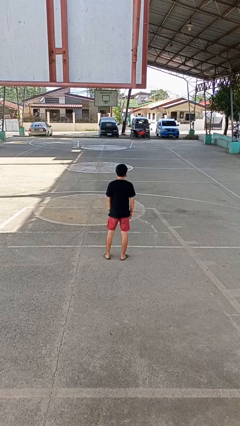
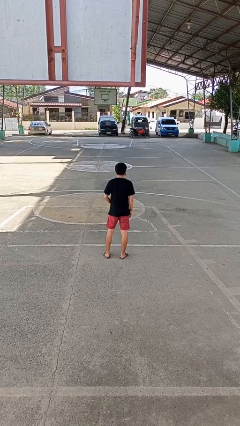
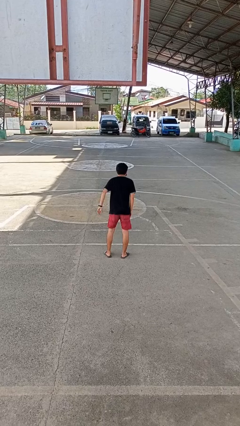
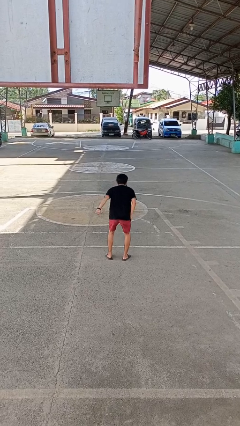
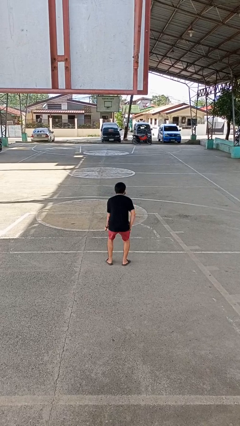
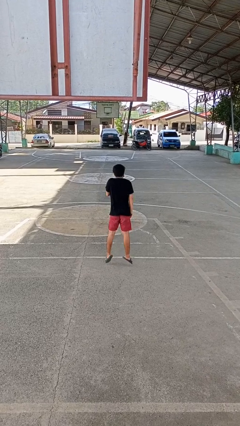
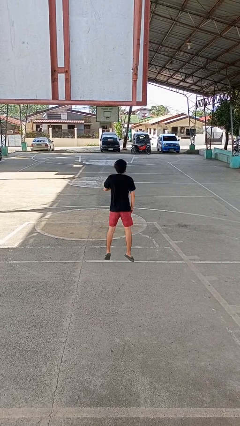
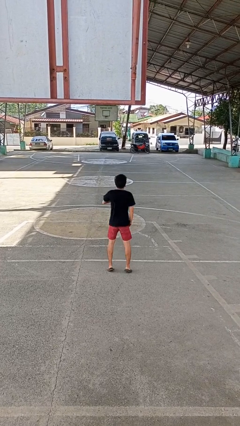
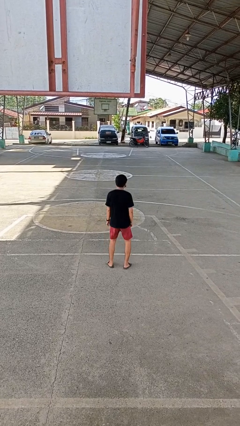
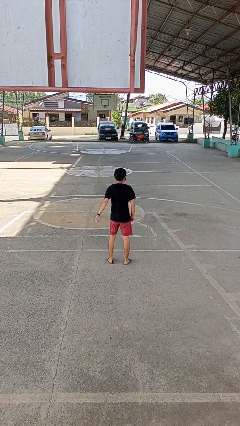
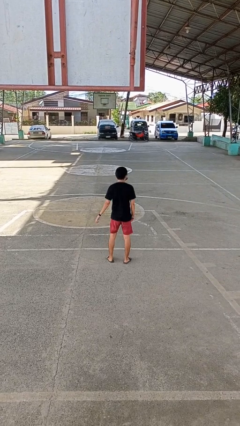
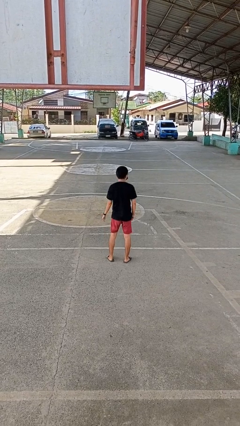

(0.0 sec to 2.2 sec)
person jumps

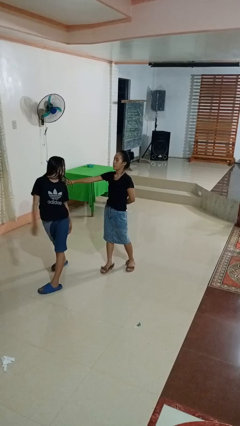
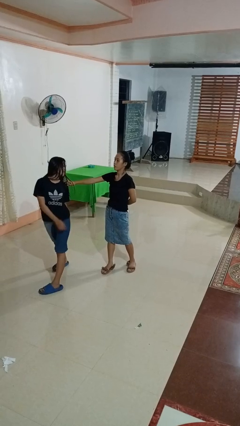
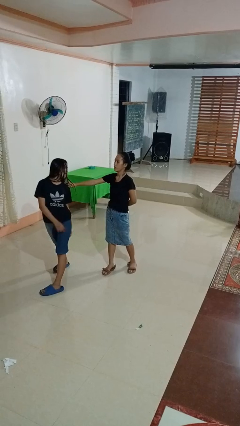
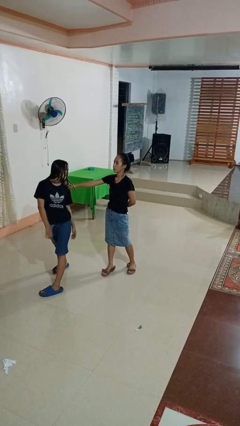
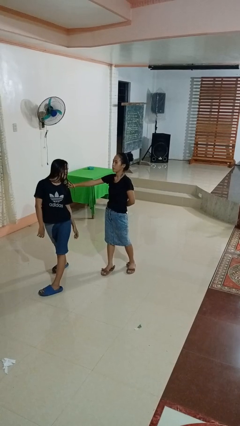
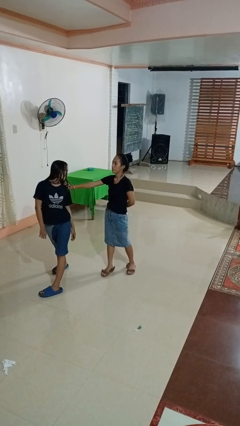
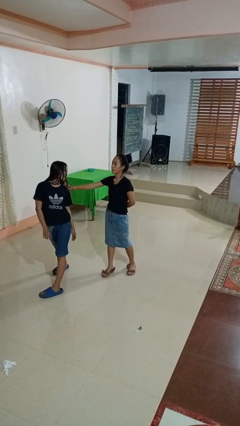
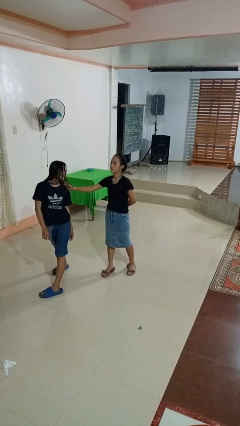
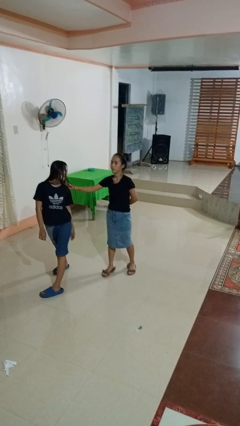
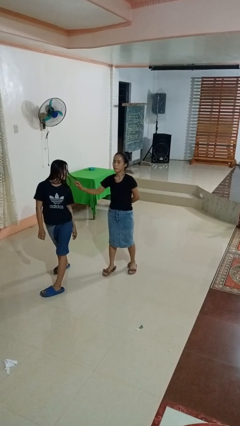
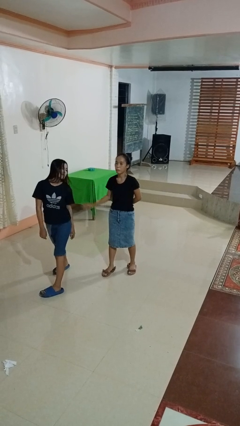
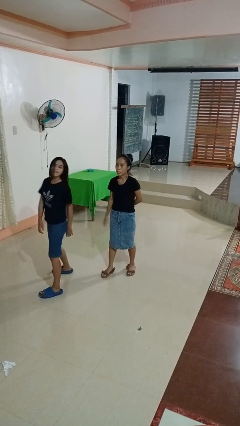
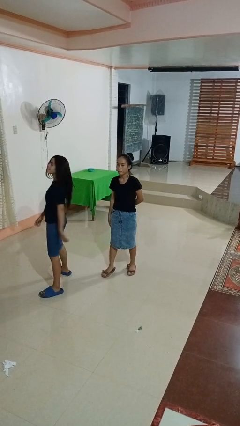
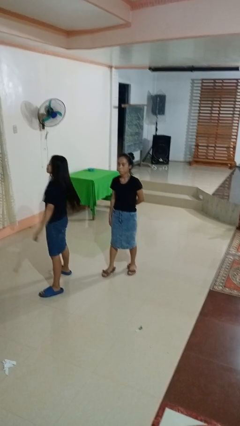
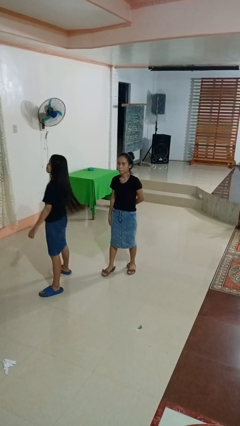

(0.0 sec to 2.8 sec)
person spins person around

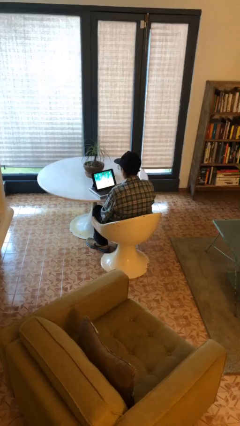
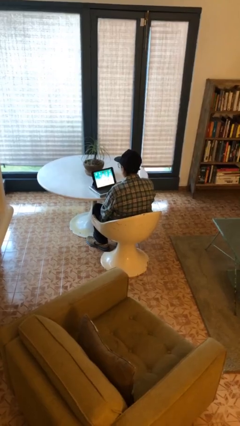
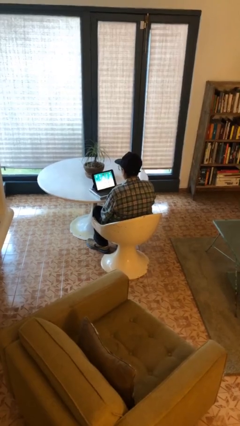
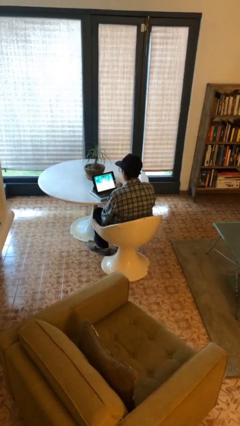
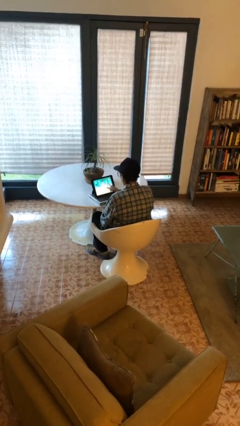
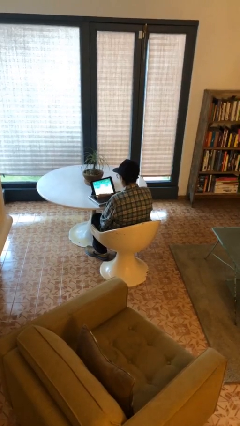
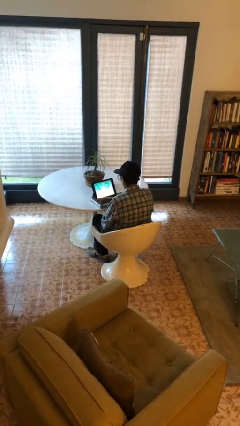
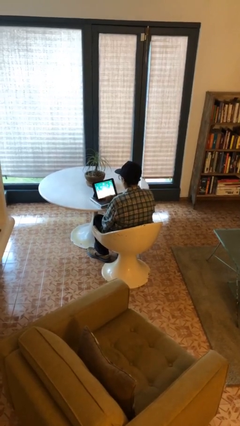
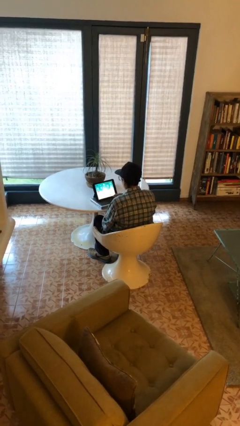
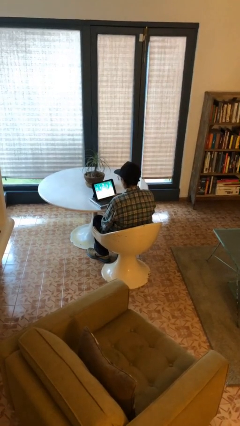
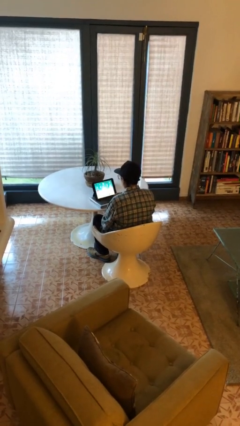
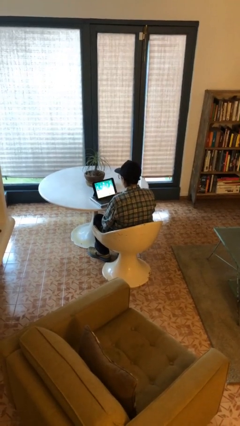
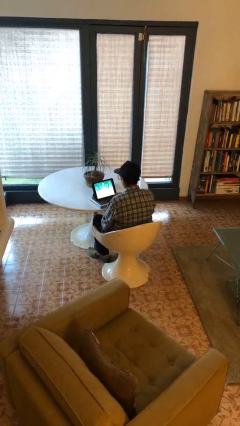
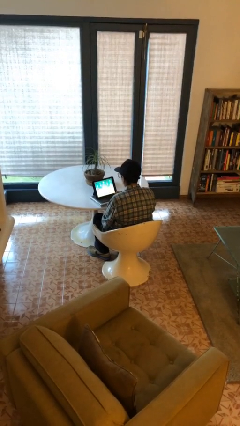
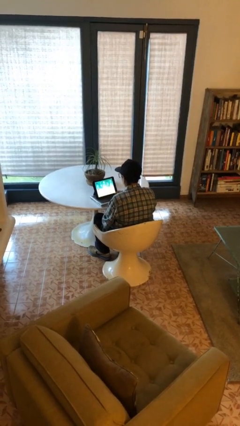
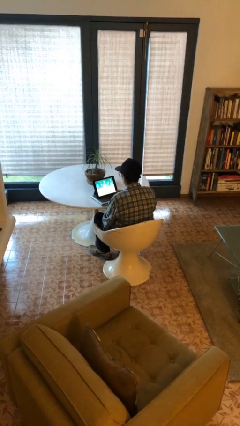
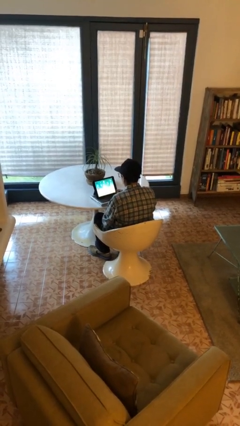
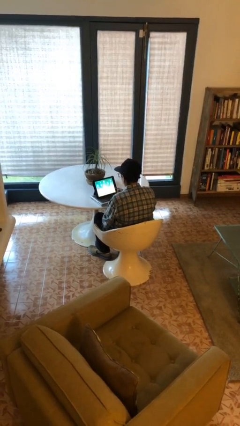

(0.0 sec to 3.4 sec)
person interacts with tablet

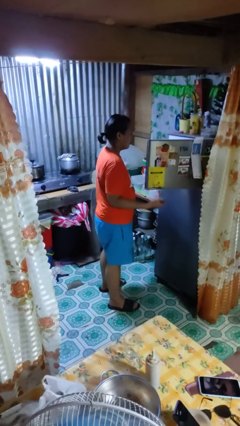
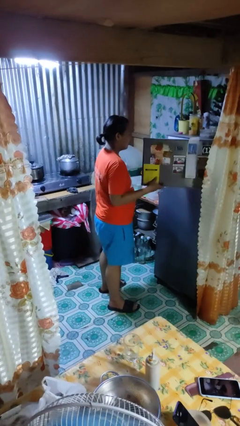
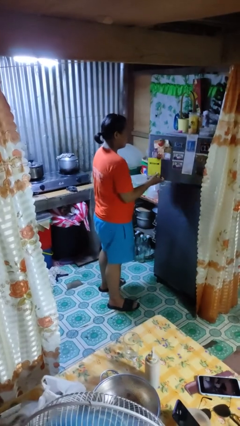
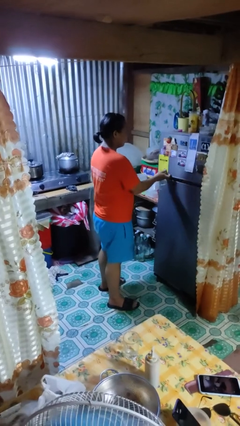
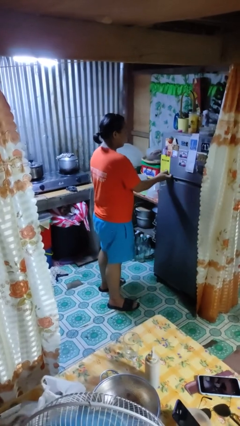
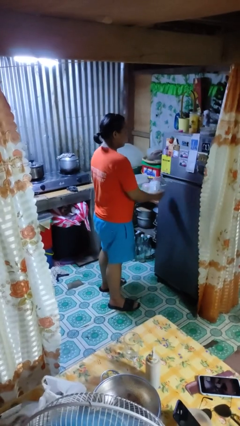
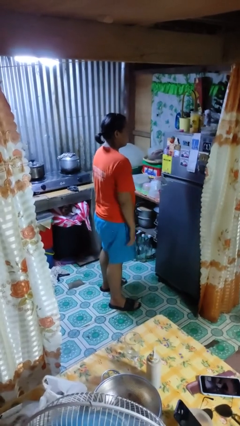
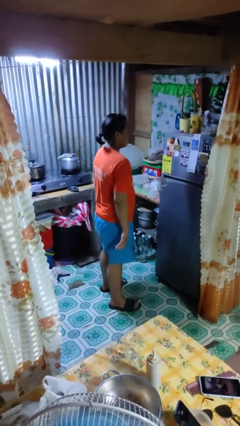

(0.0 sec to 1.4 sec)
person closes refrigerator

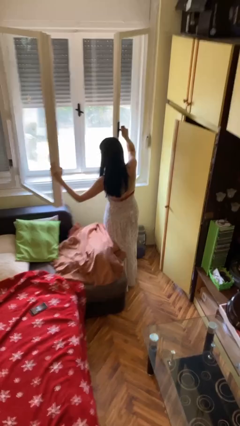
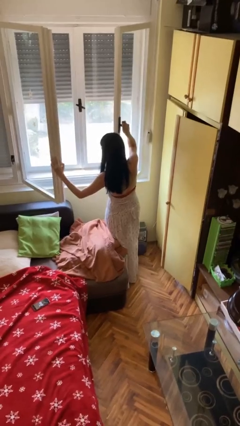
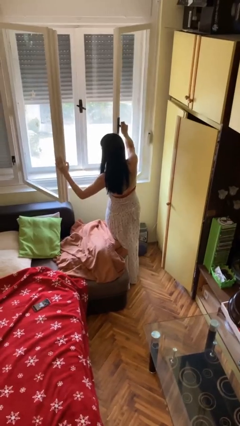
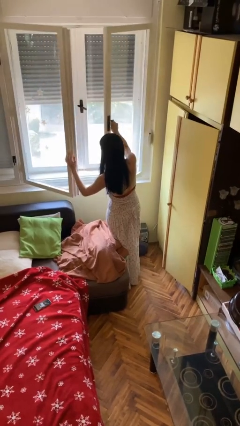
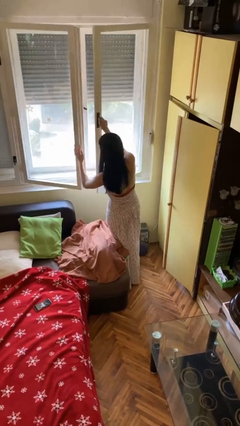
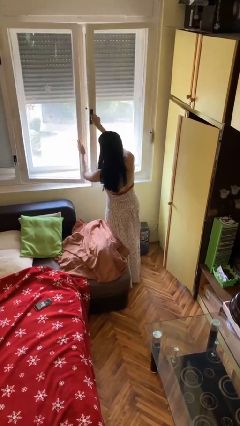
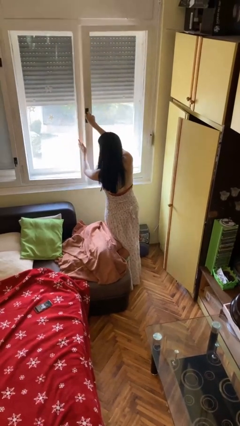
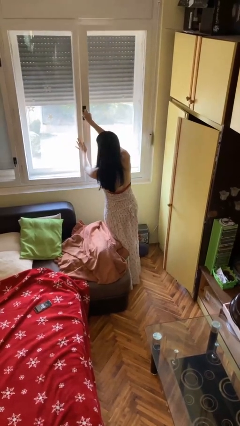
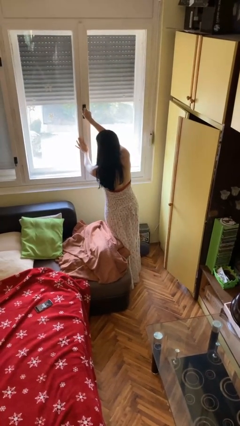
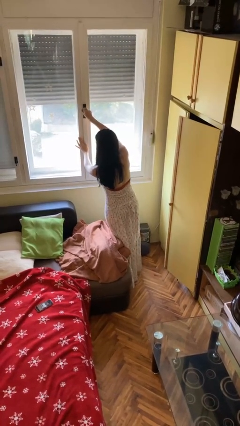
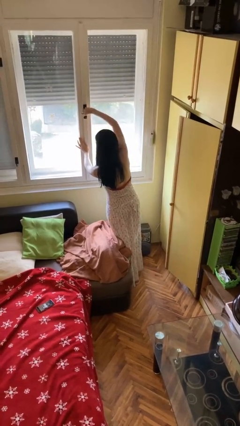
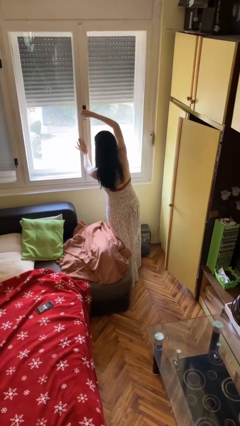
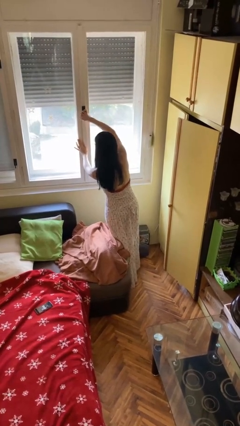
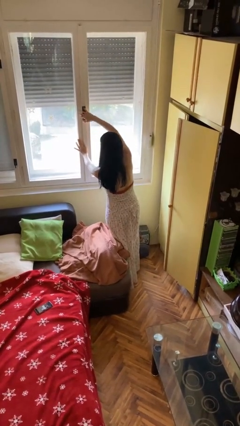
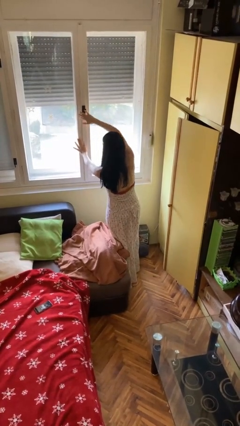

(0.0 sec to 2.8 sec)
person closes microwave

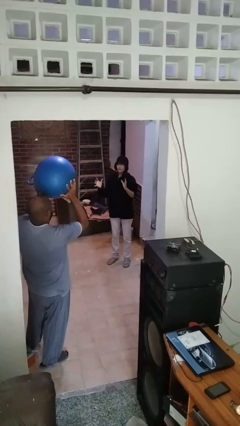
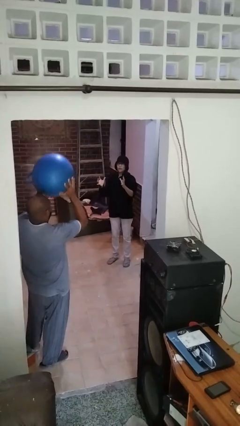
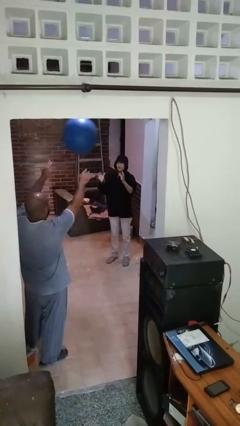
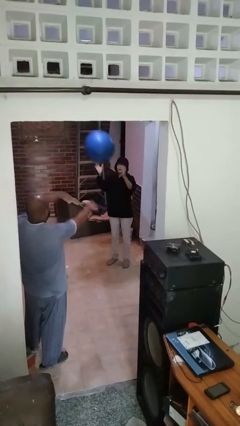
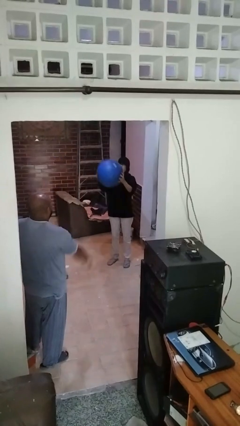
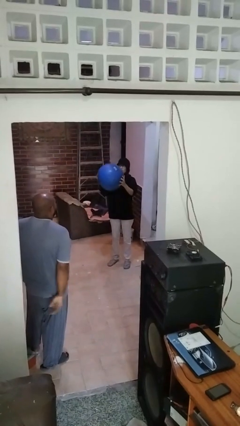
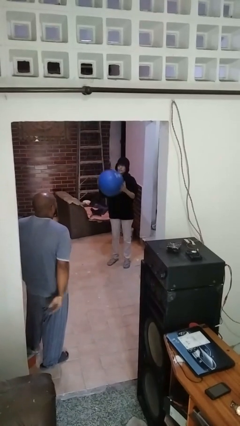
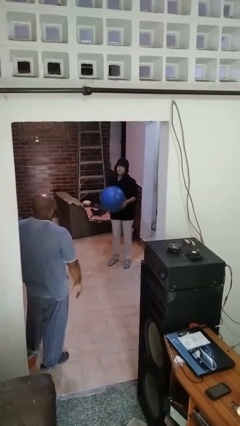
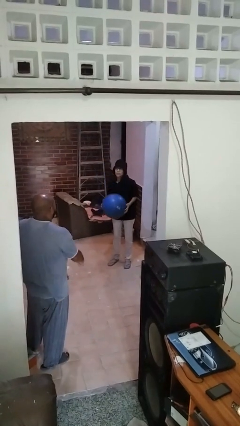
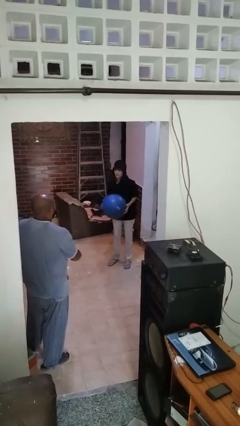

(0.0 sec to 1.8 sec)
person catches object from person

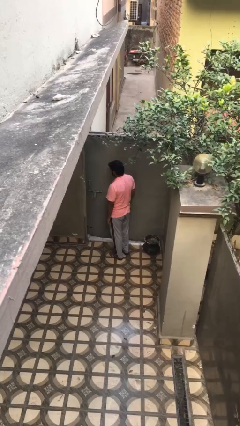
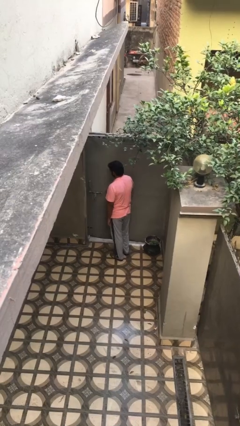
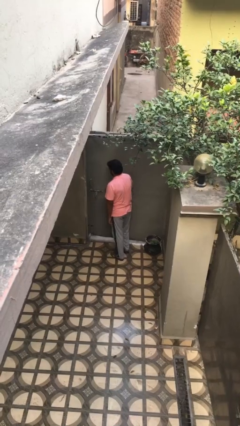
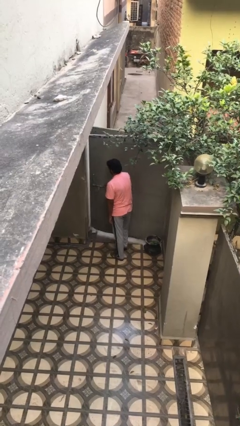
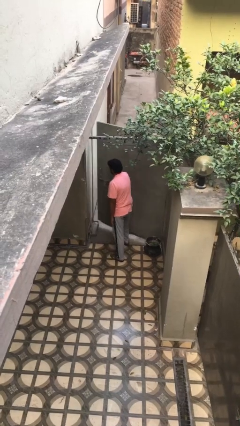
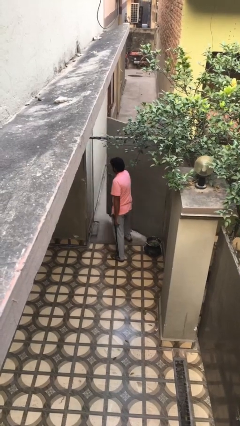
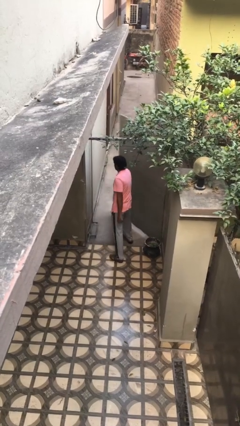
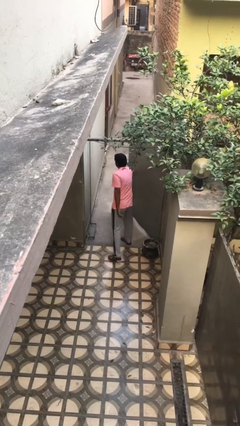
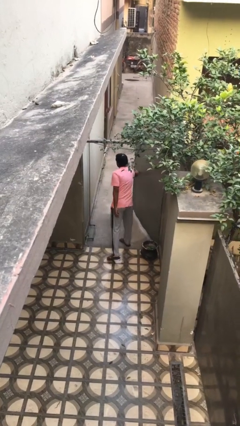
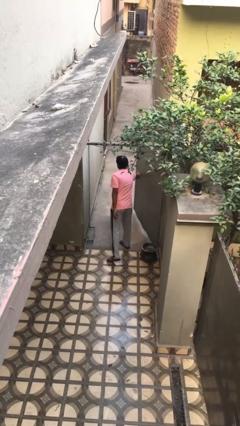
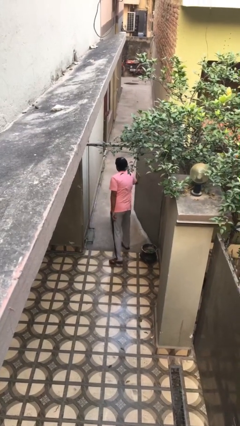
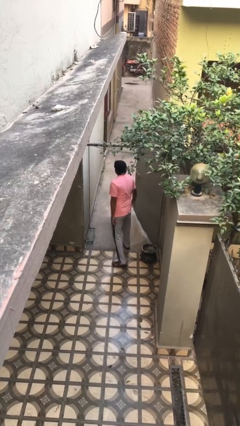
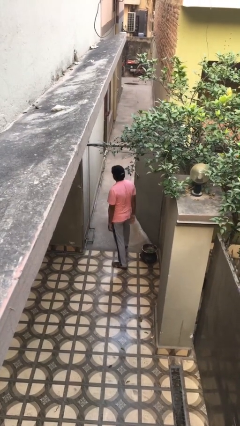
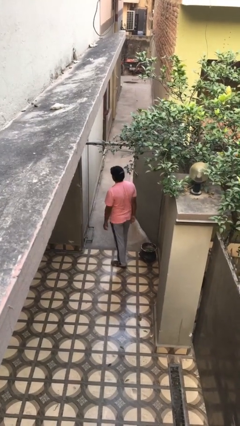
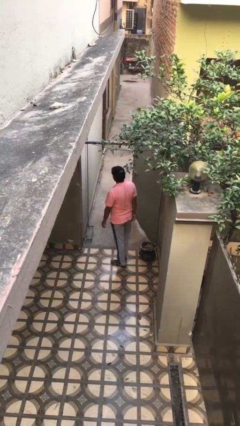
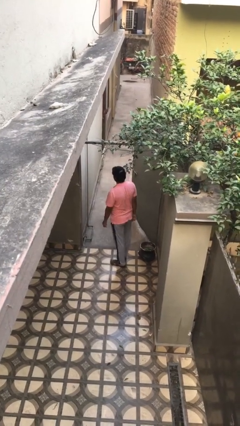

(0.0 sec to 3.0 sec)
person opens facility door
